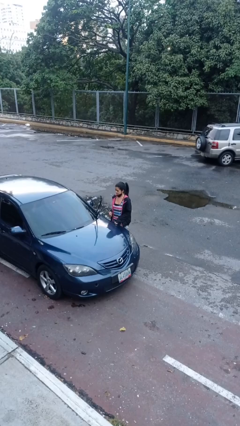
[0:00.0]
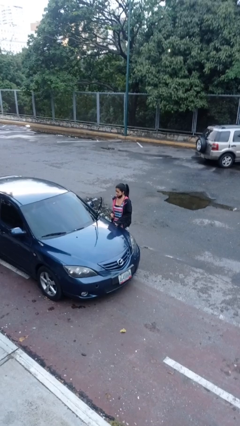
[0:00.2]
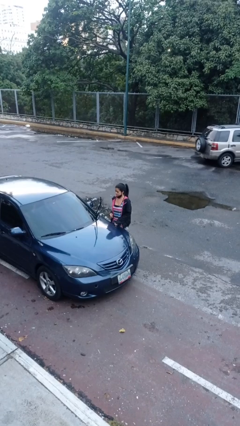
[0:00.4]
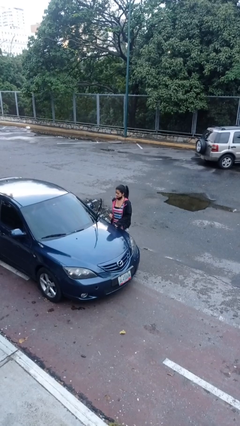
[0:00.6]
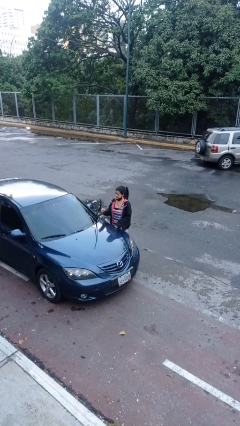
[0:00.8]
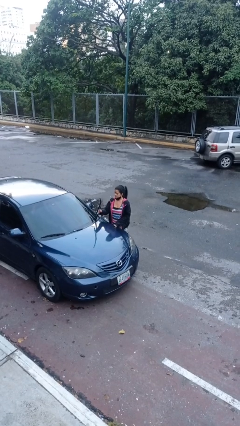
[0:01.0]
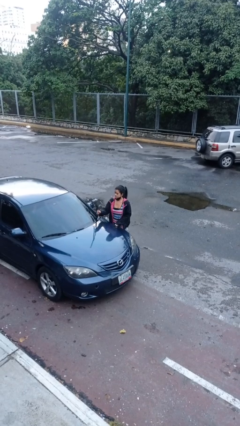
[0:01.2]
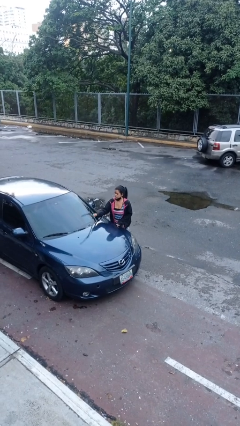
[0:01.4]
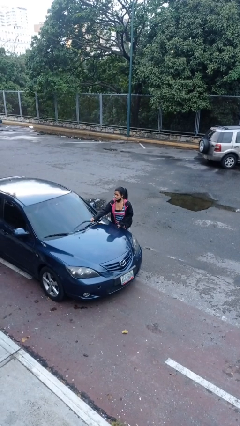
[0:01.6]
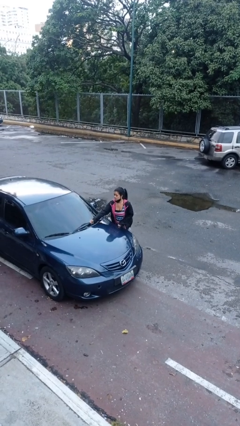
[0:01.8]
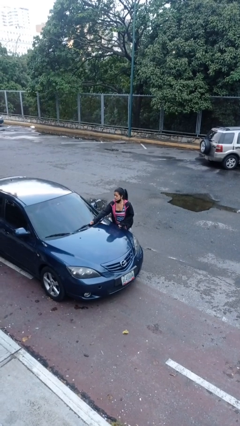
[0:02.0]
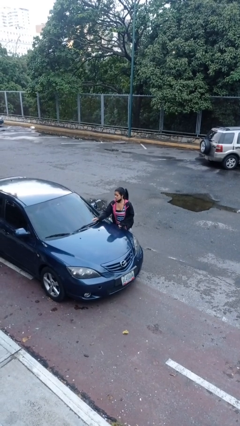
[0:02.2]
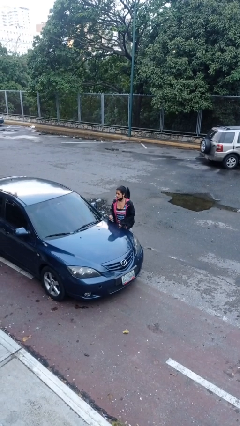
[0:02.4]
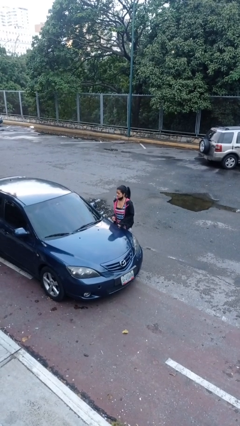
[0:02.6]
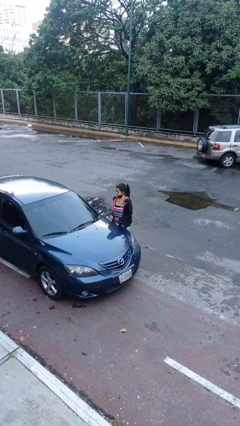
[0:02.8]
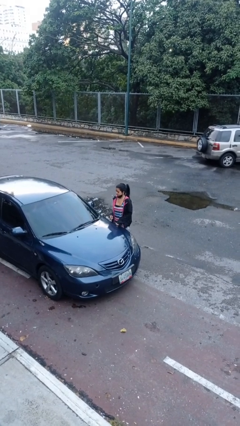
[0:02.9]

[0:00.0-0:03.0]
person flips down car wipers

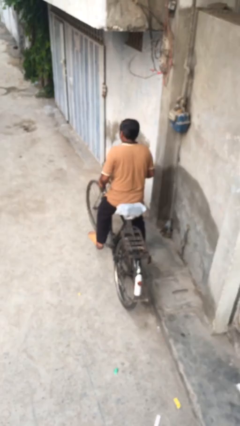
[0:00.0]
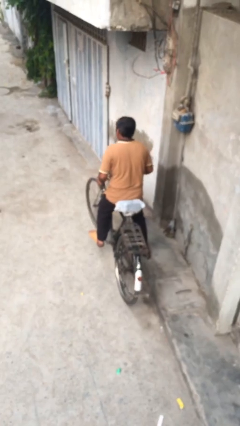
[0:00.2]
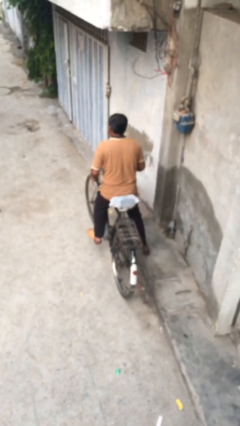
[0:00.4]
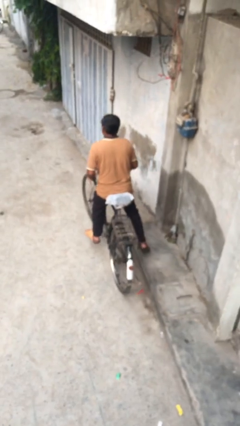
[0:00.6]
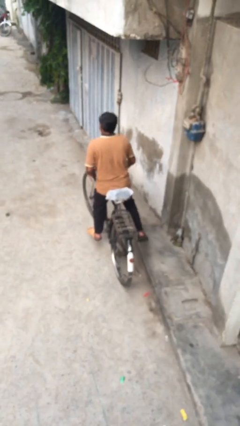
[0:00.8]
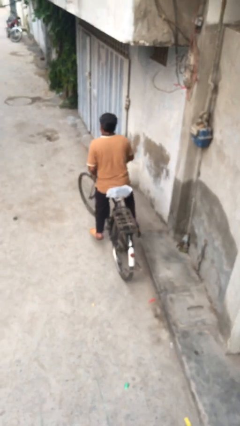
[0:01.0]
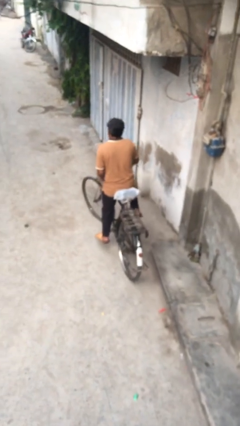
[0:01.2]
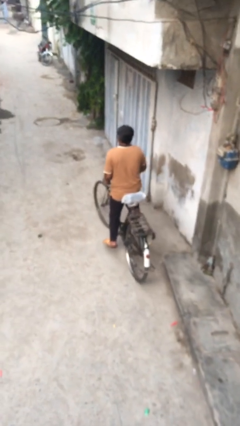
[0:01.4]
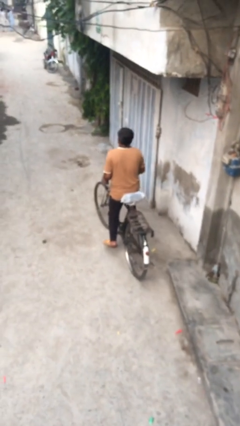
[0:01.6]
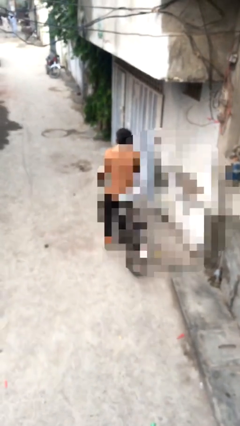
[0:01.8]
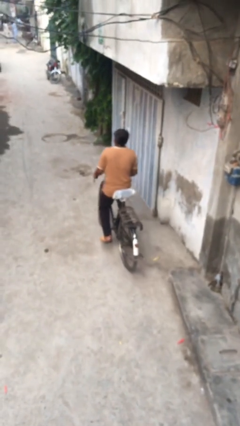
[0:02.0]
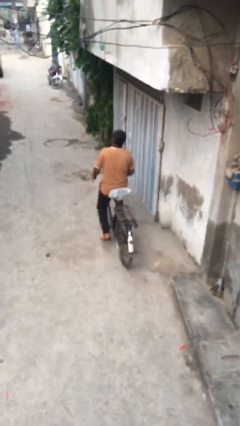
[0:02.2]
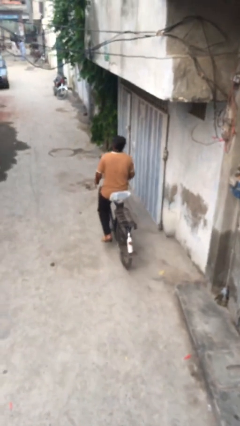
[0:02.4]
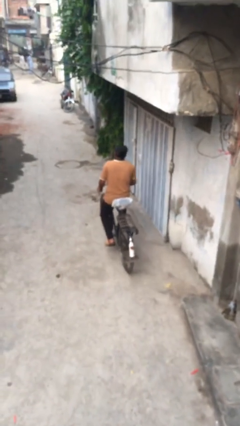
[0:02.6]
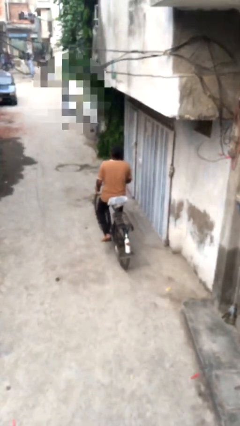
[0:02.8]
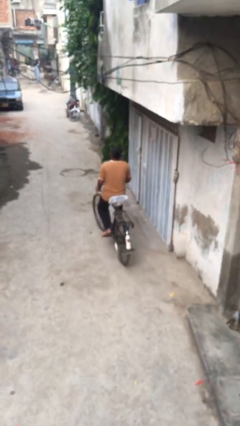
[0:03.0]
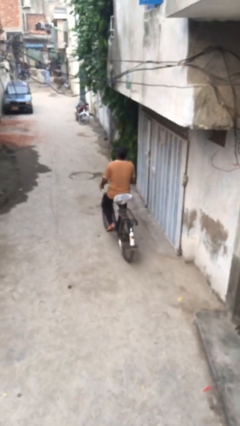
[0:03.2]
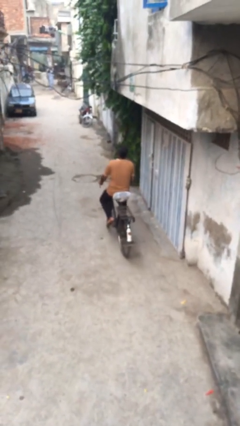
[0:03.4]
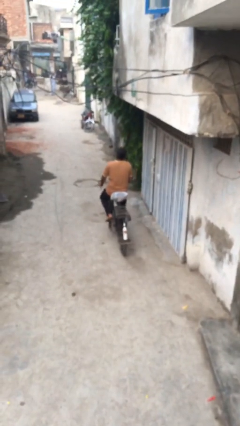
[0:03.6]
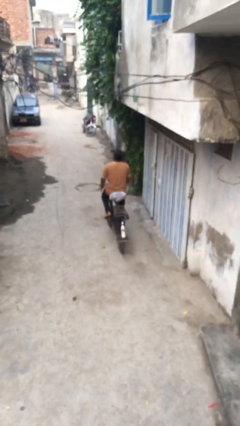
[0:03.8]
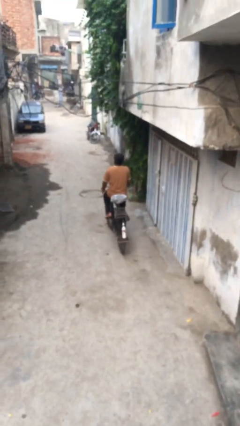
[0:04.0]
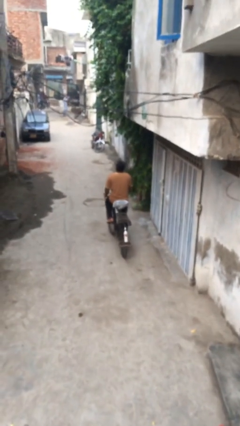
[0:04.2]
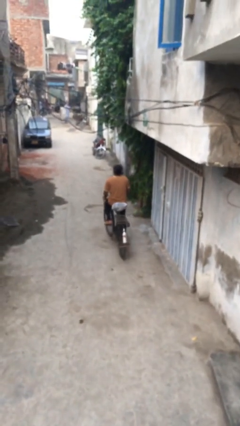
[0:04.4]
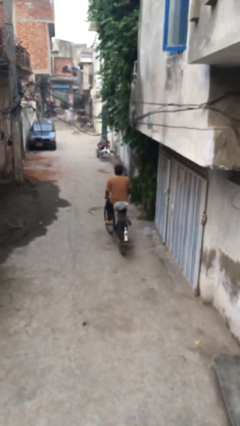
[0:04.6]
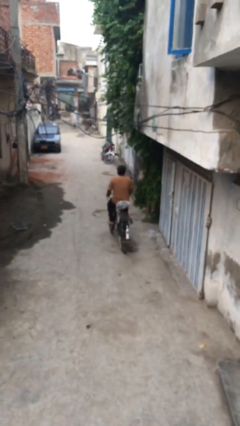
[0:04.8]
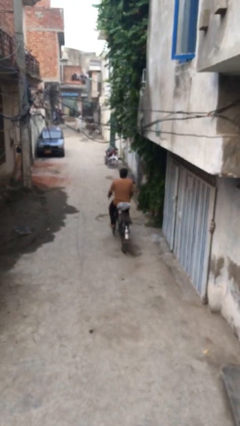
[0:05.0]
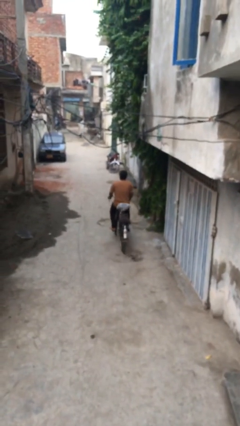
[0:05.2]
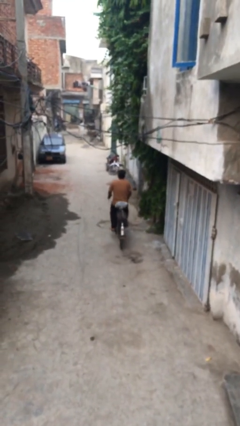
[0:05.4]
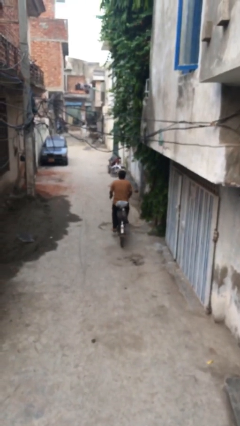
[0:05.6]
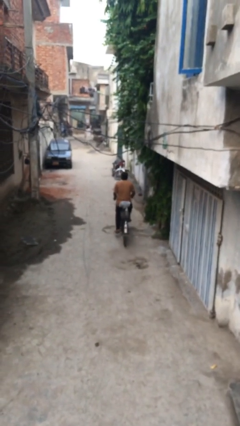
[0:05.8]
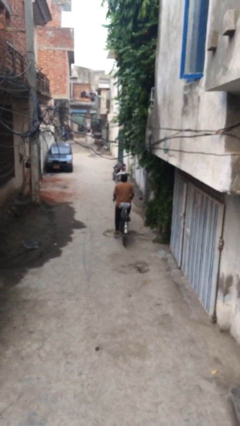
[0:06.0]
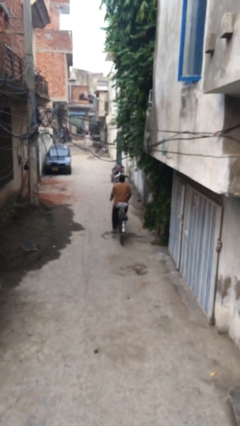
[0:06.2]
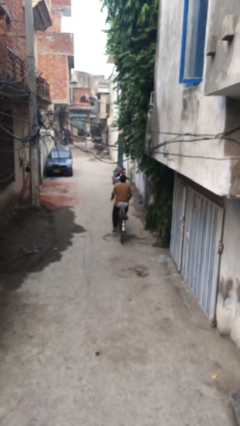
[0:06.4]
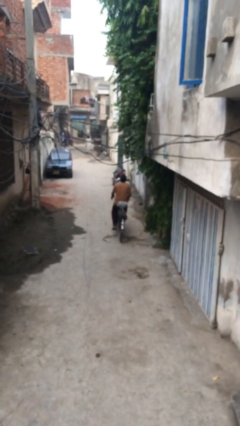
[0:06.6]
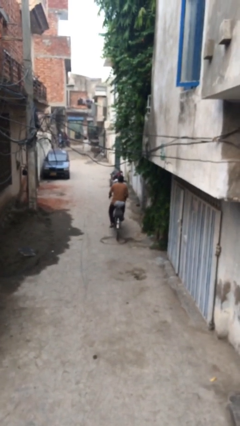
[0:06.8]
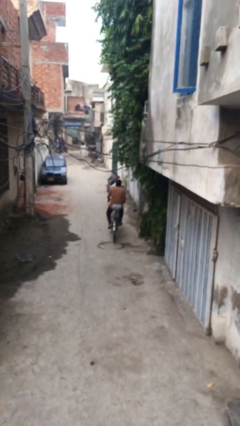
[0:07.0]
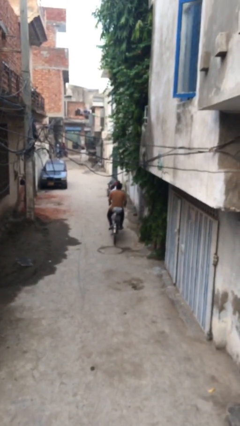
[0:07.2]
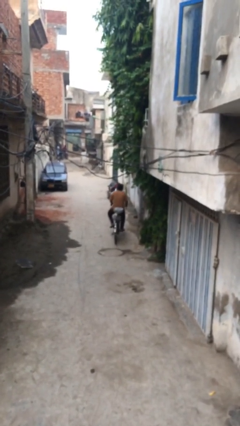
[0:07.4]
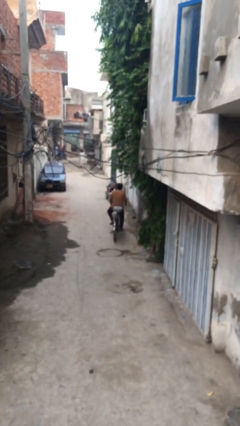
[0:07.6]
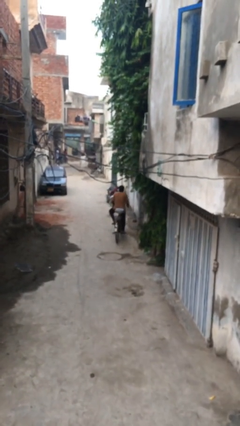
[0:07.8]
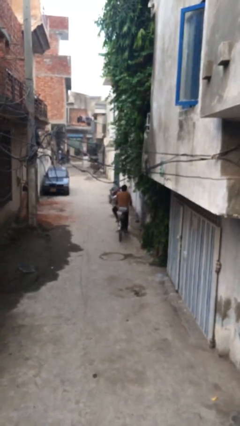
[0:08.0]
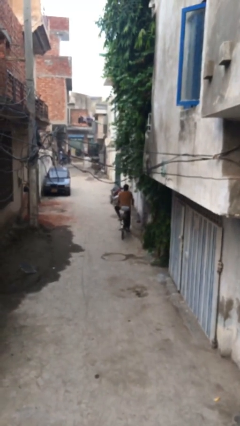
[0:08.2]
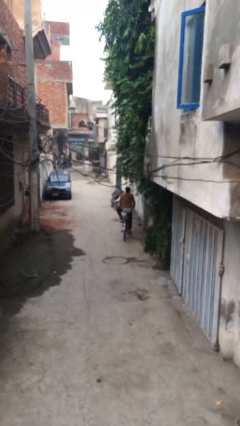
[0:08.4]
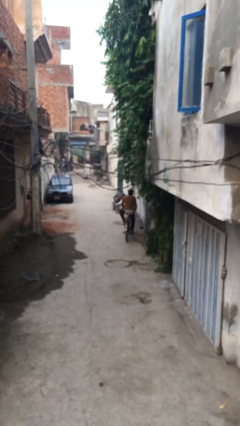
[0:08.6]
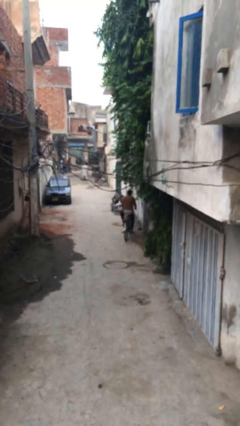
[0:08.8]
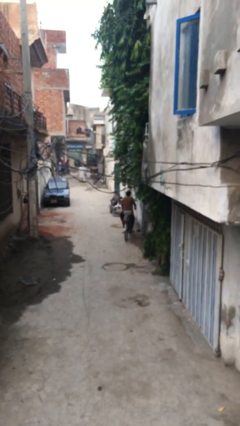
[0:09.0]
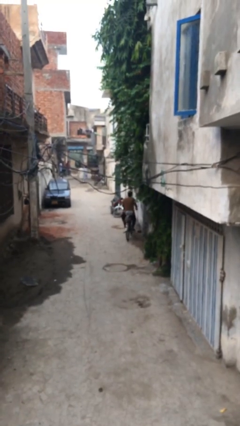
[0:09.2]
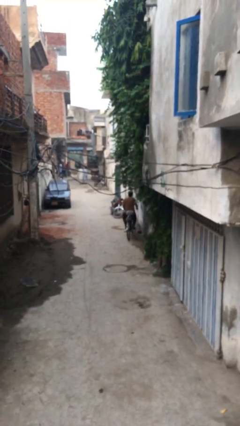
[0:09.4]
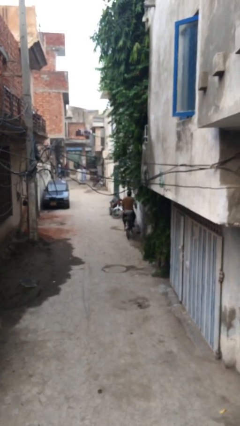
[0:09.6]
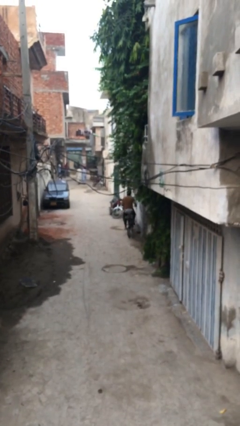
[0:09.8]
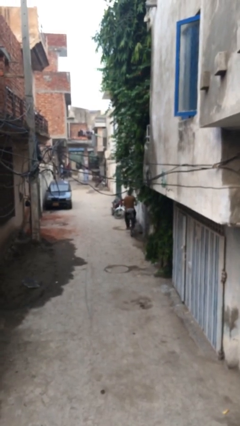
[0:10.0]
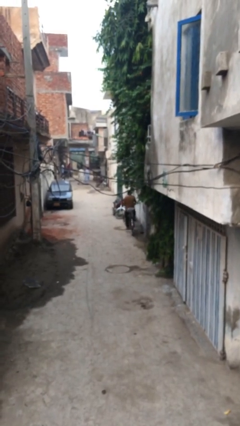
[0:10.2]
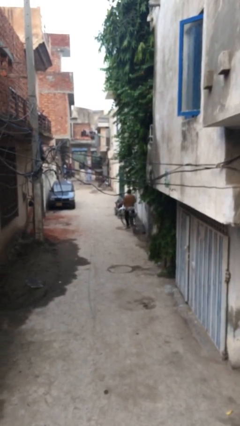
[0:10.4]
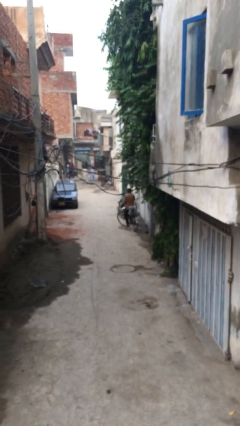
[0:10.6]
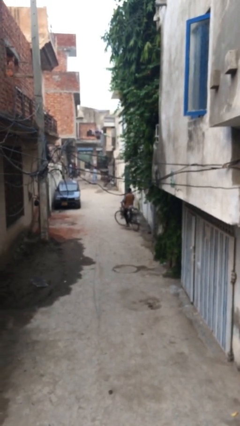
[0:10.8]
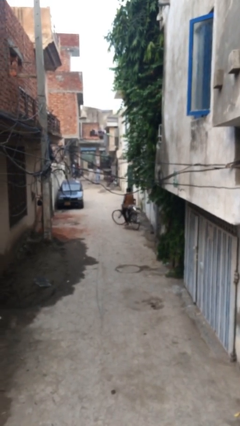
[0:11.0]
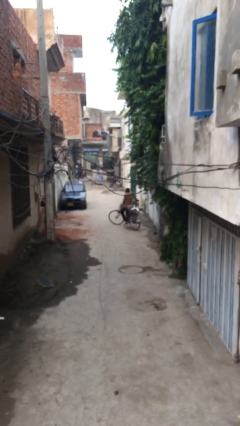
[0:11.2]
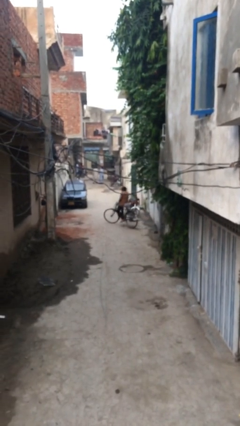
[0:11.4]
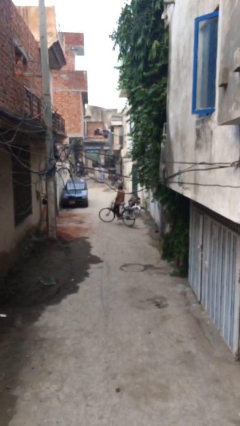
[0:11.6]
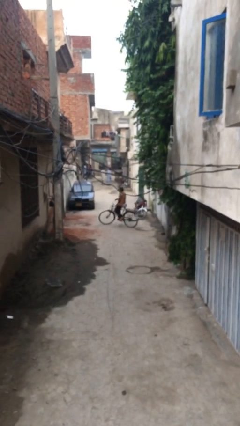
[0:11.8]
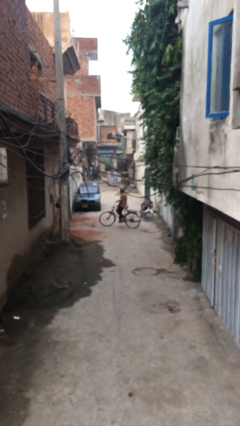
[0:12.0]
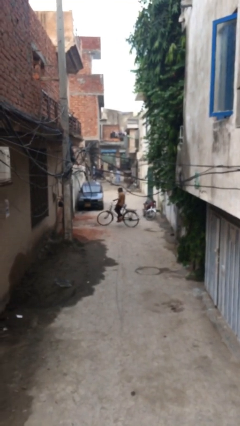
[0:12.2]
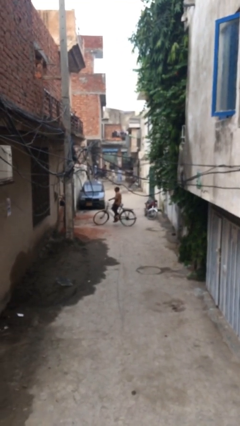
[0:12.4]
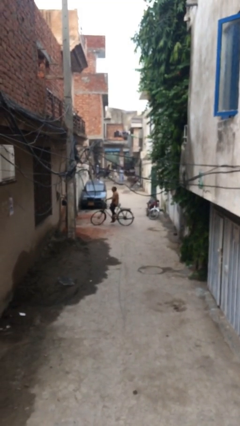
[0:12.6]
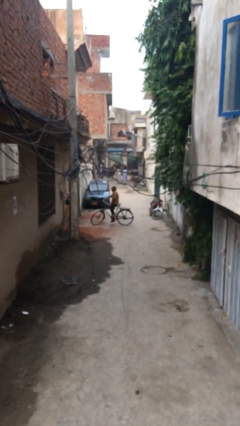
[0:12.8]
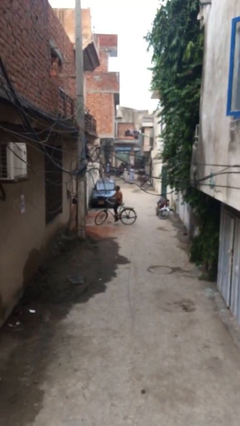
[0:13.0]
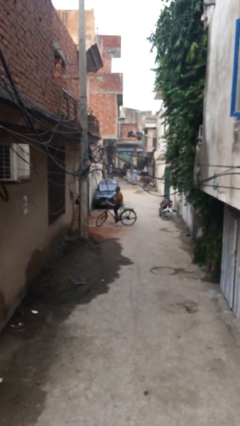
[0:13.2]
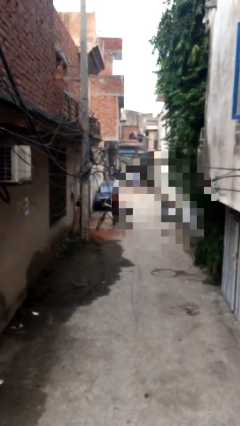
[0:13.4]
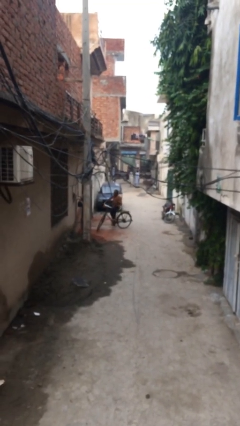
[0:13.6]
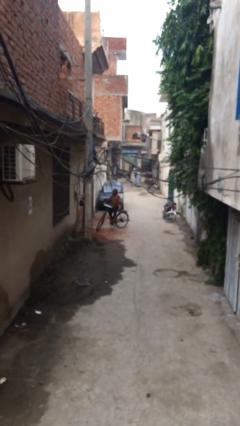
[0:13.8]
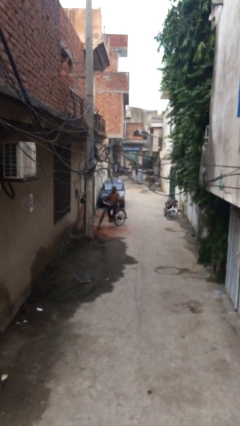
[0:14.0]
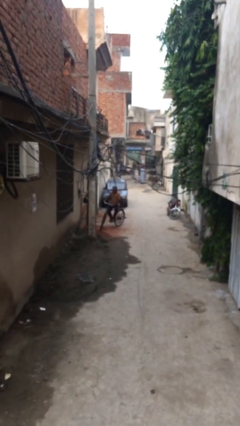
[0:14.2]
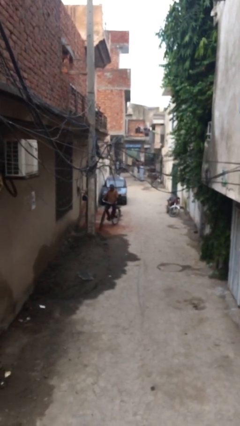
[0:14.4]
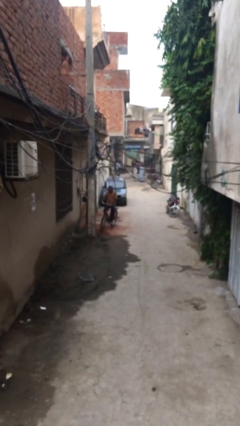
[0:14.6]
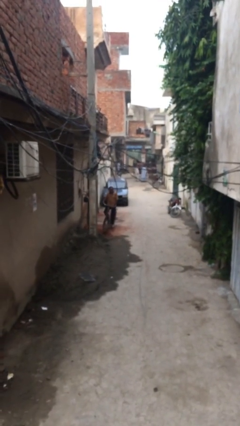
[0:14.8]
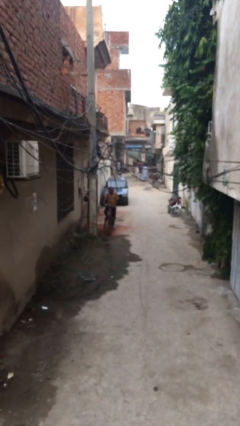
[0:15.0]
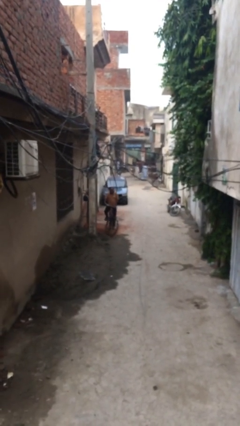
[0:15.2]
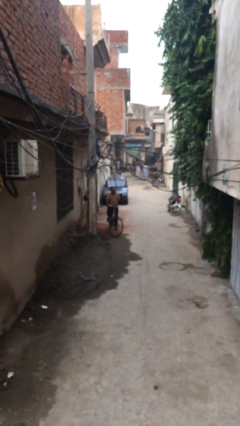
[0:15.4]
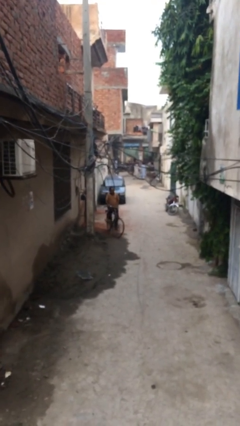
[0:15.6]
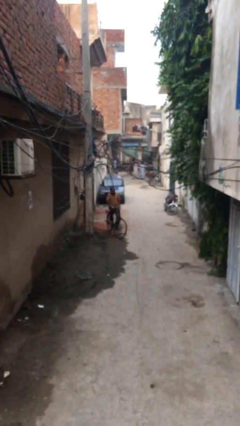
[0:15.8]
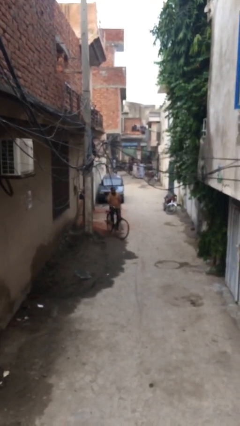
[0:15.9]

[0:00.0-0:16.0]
person rides bicycle
